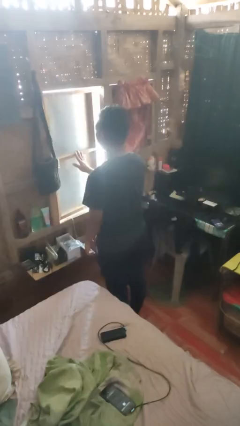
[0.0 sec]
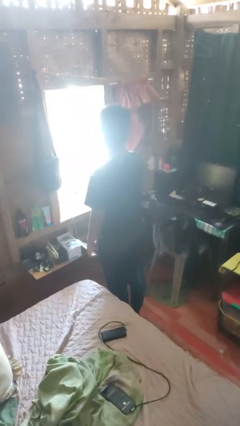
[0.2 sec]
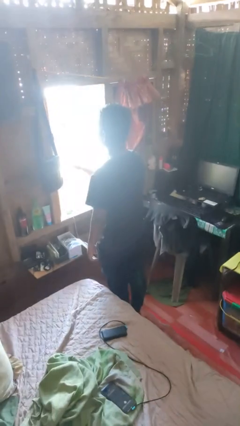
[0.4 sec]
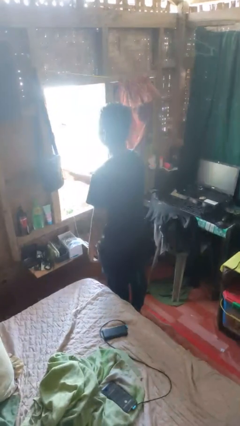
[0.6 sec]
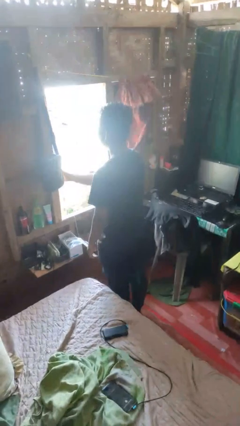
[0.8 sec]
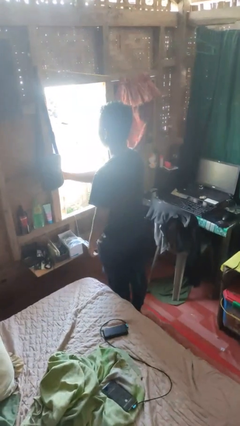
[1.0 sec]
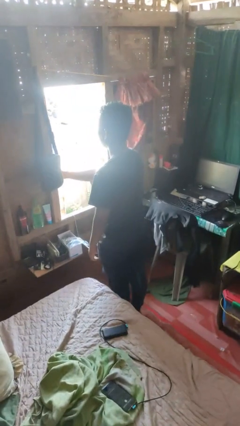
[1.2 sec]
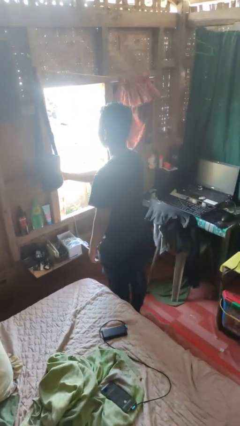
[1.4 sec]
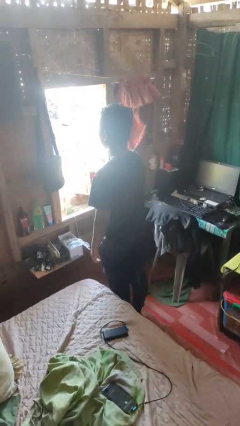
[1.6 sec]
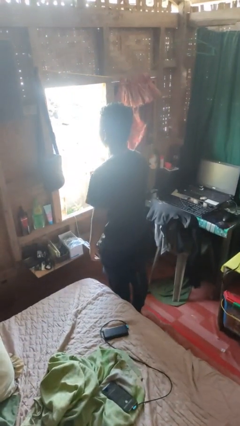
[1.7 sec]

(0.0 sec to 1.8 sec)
person opens home window

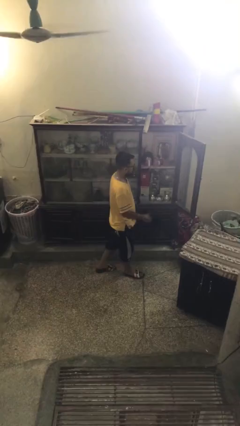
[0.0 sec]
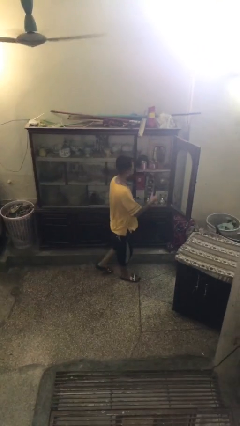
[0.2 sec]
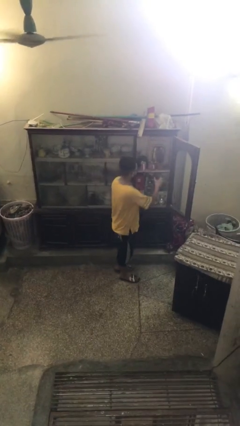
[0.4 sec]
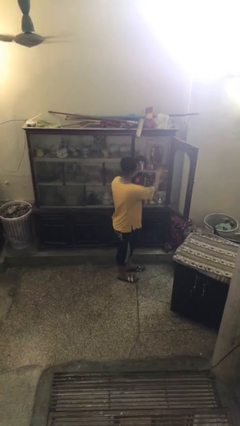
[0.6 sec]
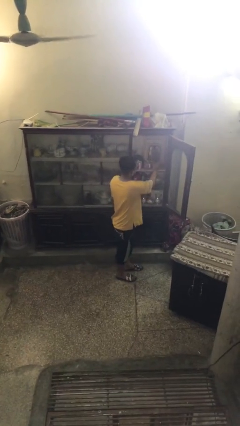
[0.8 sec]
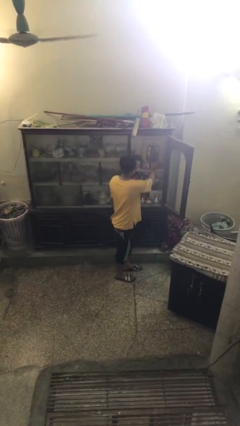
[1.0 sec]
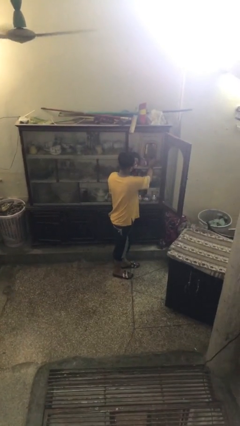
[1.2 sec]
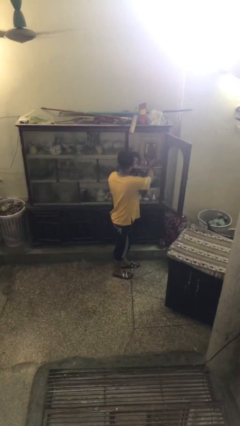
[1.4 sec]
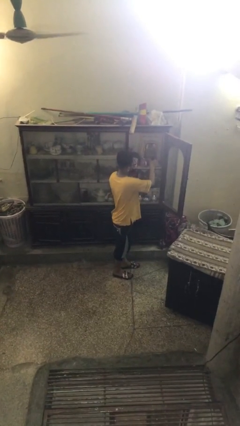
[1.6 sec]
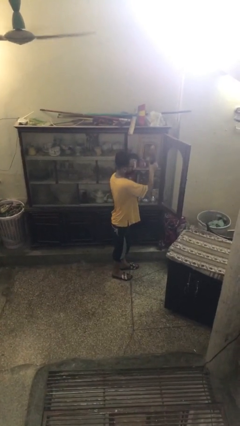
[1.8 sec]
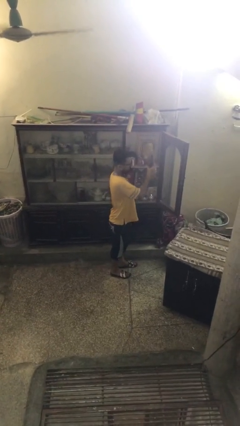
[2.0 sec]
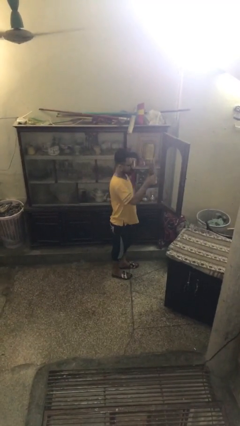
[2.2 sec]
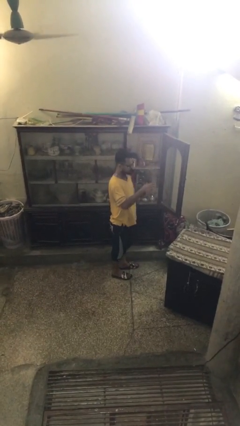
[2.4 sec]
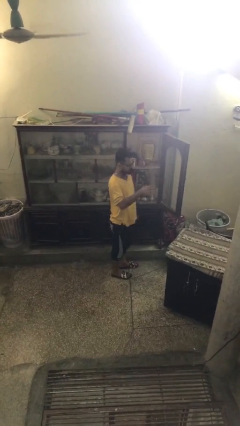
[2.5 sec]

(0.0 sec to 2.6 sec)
person picks up object from shelf

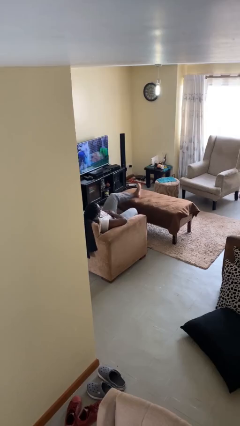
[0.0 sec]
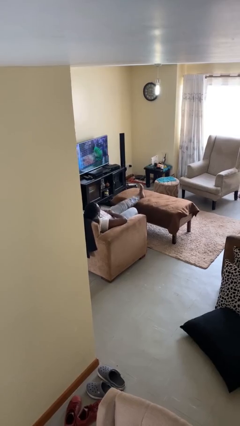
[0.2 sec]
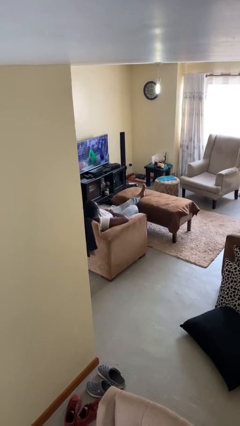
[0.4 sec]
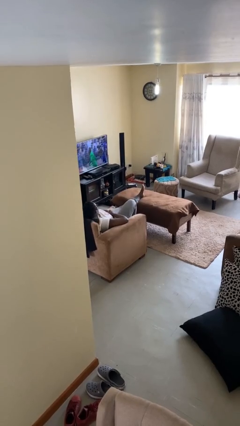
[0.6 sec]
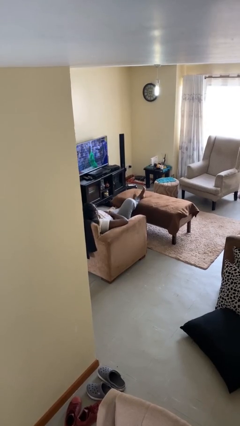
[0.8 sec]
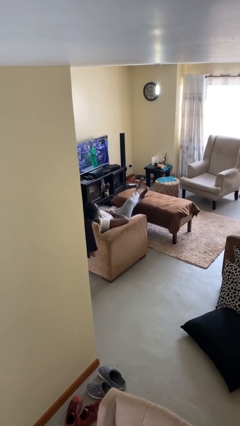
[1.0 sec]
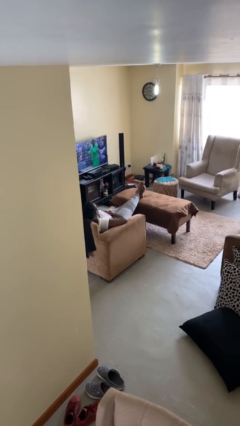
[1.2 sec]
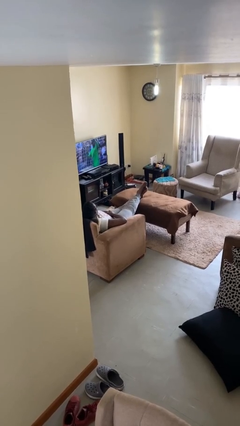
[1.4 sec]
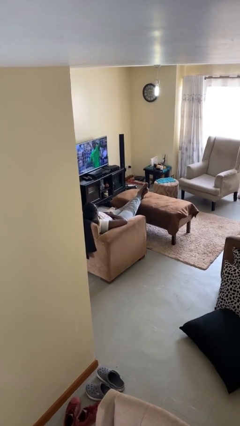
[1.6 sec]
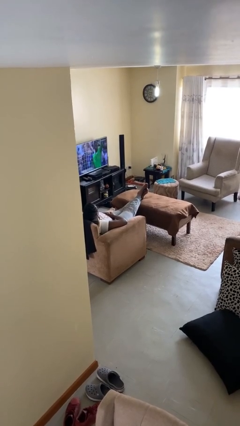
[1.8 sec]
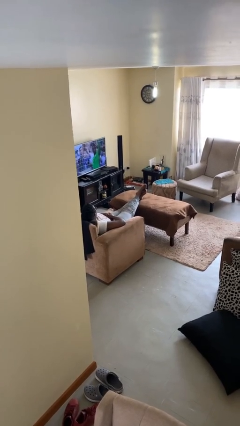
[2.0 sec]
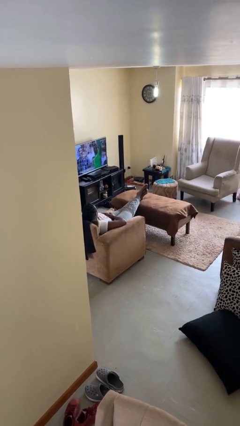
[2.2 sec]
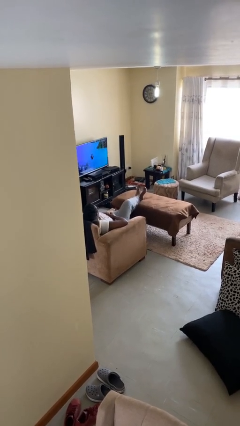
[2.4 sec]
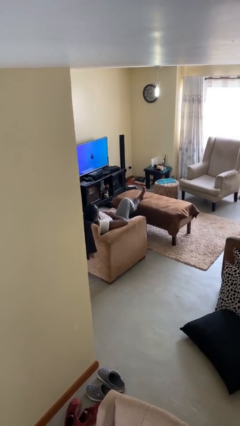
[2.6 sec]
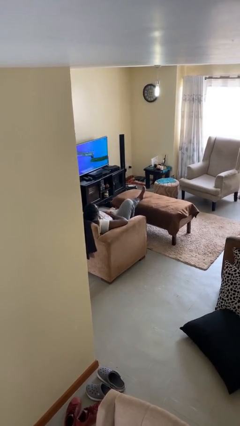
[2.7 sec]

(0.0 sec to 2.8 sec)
person puts feet up

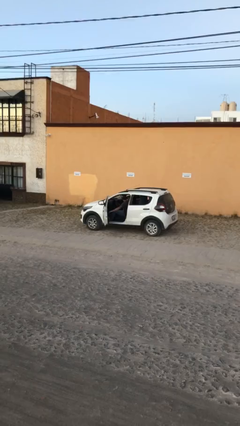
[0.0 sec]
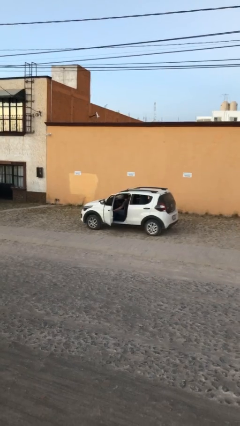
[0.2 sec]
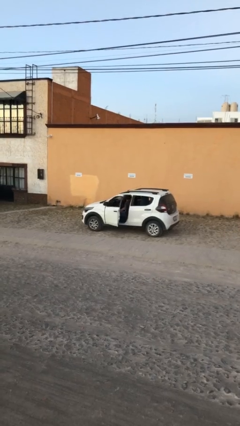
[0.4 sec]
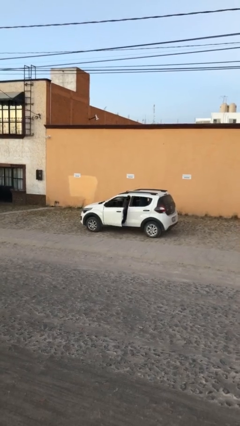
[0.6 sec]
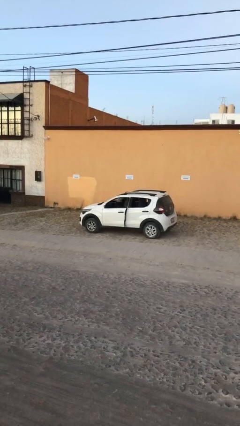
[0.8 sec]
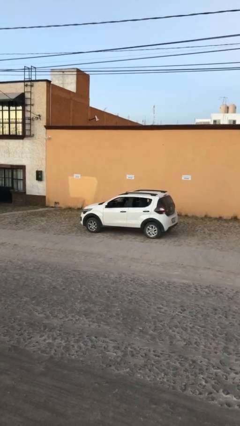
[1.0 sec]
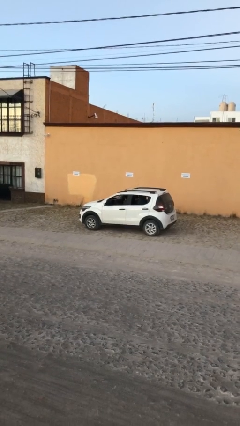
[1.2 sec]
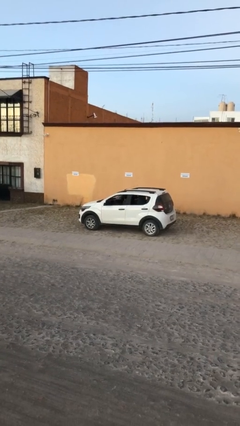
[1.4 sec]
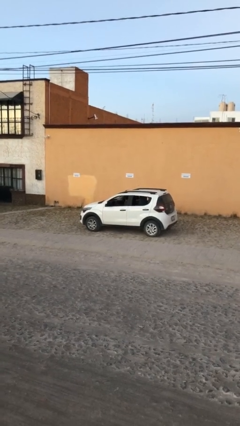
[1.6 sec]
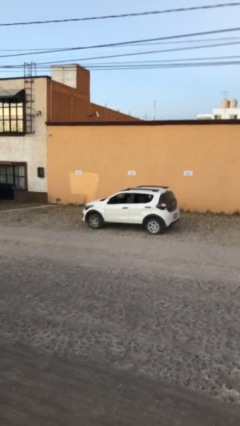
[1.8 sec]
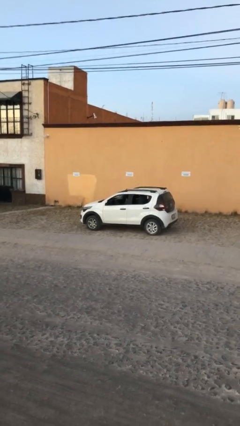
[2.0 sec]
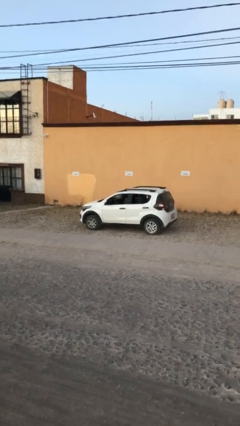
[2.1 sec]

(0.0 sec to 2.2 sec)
person closes car door

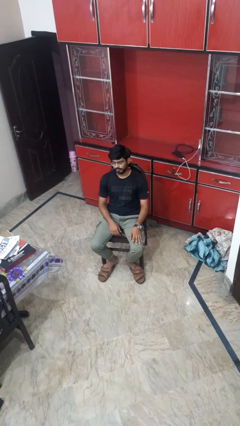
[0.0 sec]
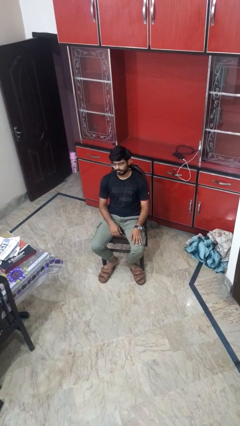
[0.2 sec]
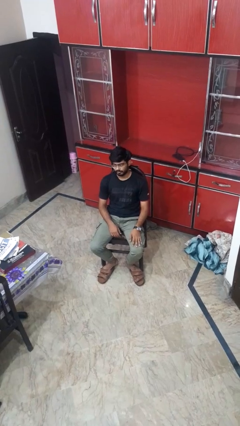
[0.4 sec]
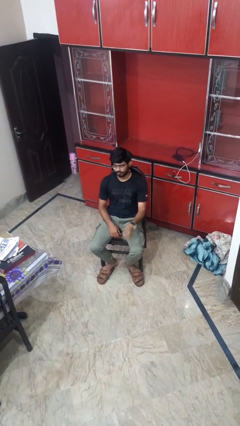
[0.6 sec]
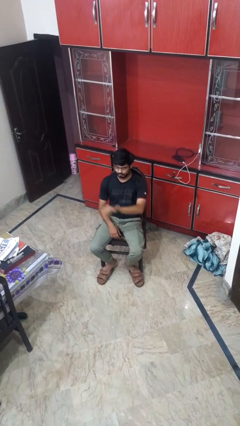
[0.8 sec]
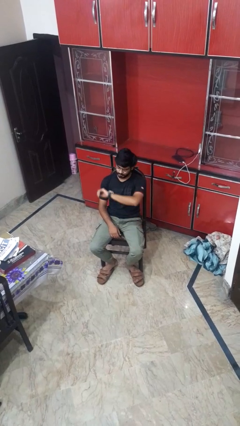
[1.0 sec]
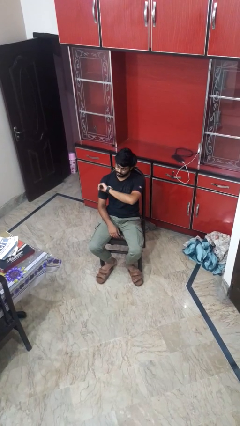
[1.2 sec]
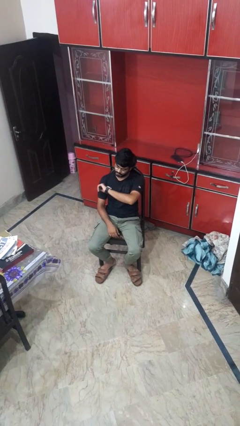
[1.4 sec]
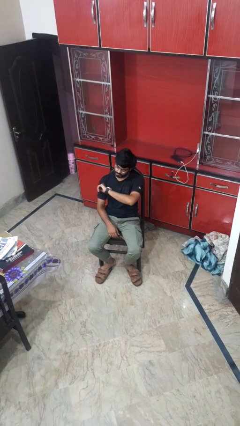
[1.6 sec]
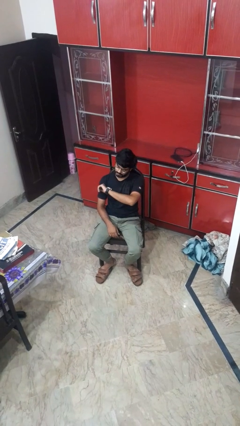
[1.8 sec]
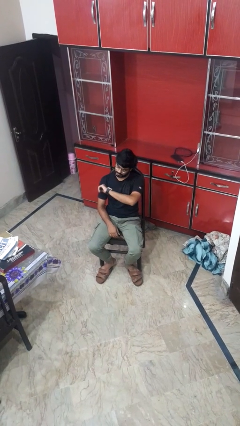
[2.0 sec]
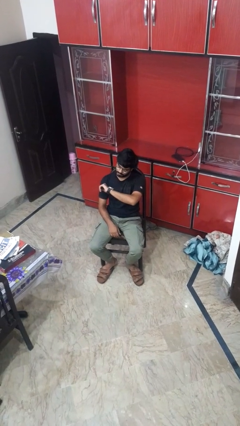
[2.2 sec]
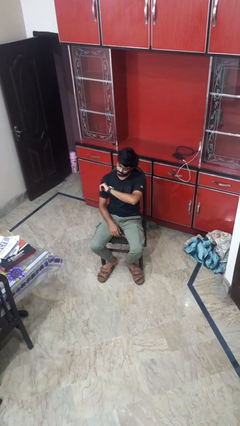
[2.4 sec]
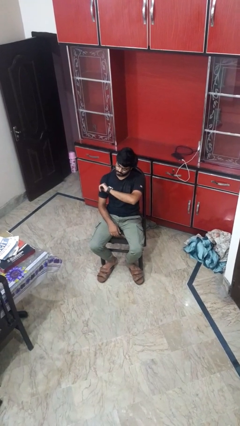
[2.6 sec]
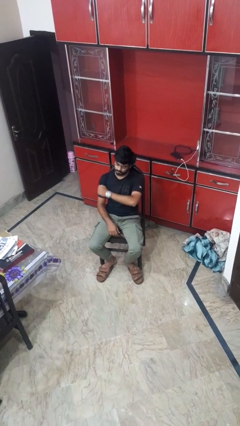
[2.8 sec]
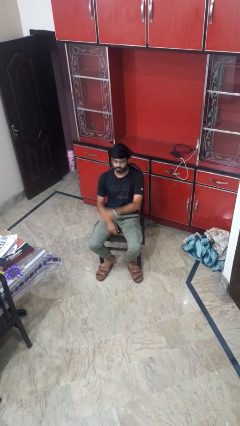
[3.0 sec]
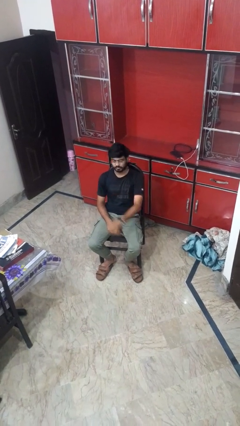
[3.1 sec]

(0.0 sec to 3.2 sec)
person looks at wristwatch

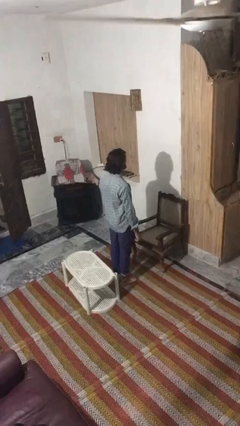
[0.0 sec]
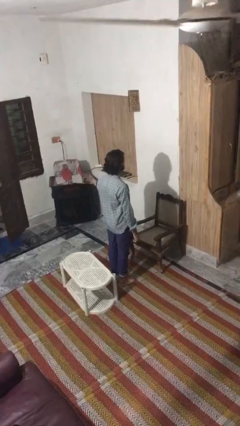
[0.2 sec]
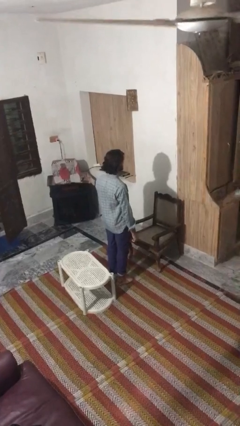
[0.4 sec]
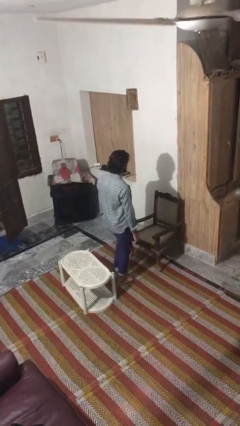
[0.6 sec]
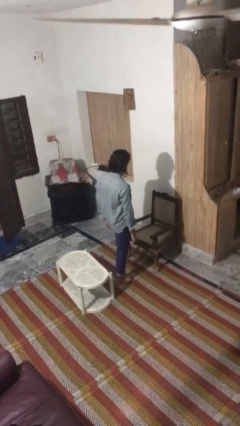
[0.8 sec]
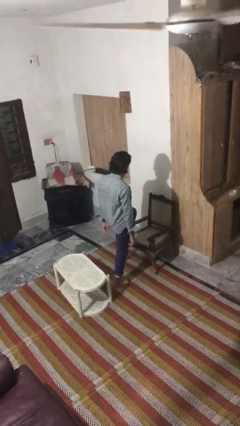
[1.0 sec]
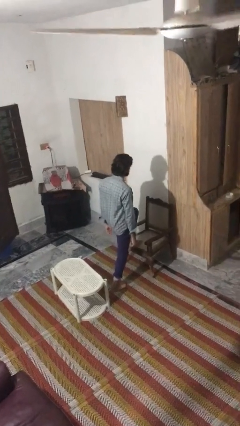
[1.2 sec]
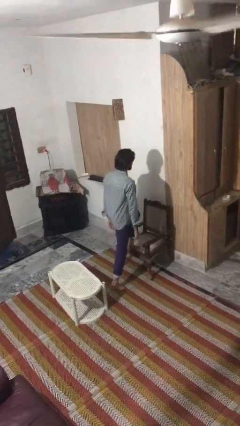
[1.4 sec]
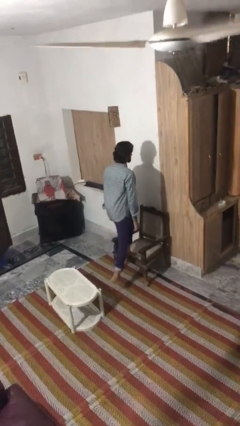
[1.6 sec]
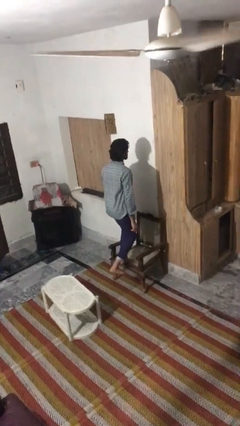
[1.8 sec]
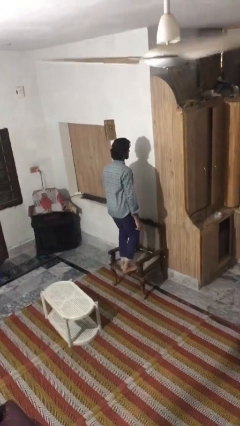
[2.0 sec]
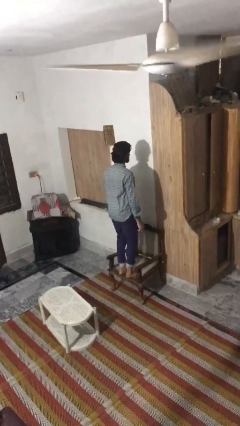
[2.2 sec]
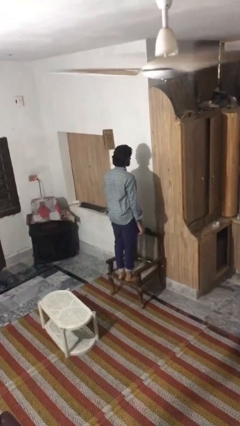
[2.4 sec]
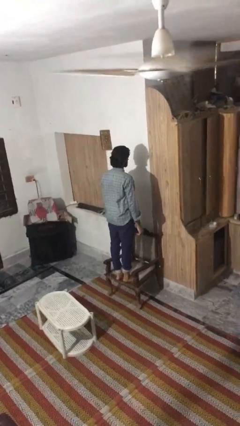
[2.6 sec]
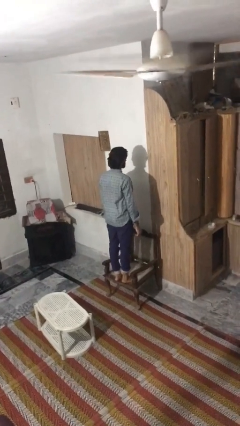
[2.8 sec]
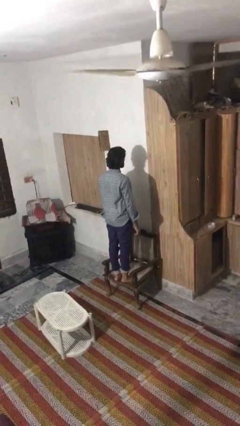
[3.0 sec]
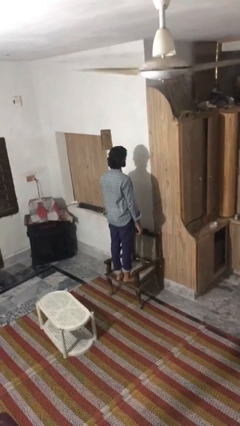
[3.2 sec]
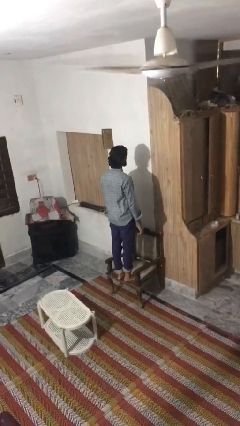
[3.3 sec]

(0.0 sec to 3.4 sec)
person climbs on chair

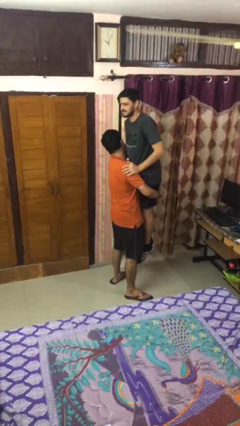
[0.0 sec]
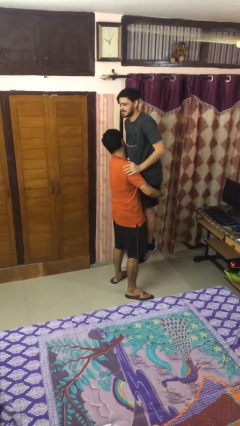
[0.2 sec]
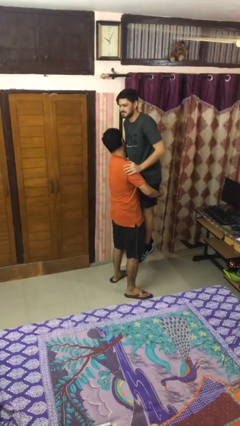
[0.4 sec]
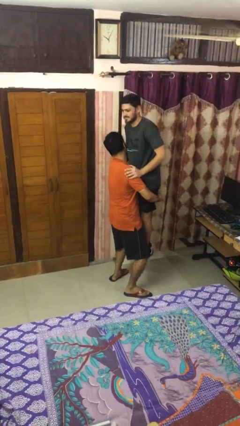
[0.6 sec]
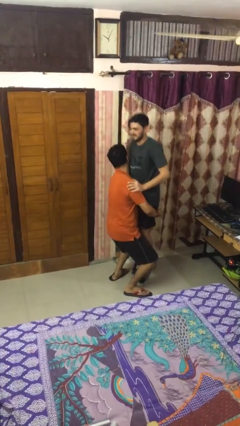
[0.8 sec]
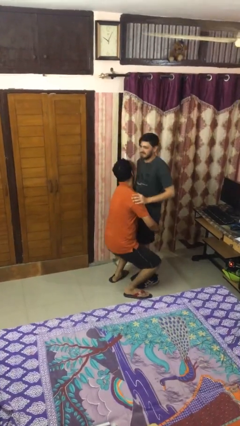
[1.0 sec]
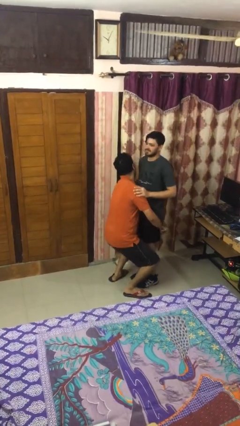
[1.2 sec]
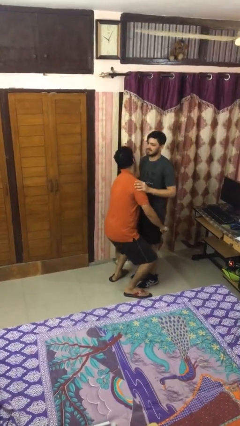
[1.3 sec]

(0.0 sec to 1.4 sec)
person puts down person
